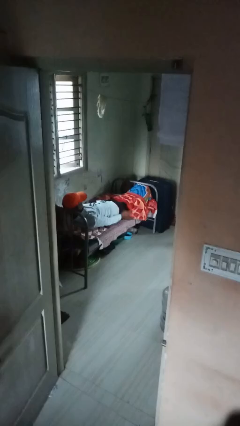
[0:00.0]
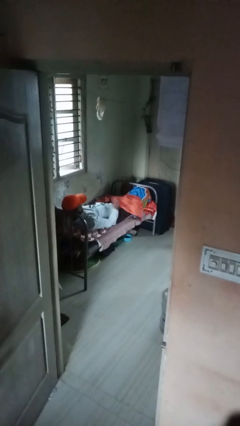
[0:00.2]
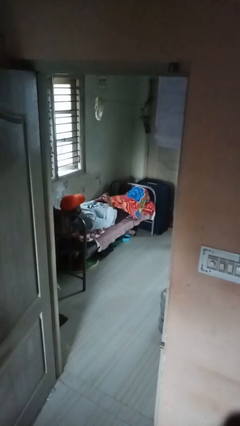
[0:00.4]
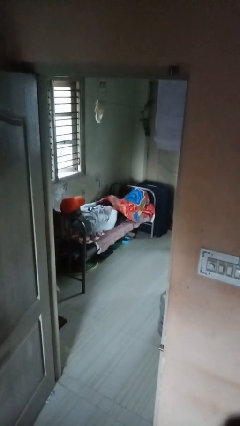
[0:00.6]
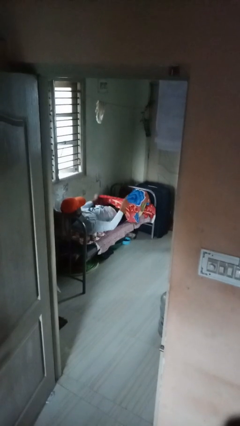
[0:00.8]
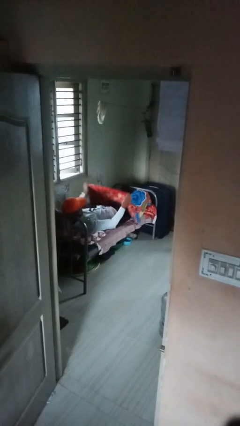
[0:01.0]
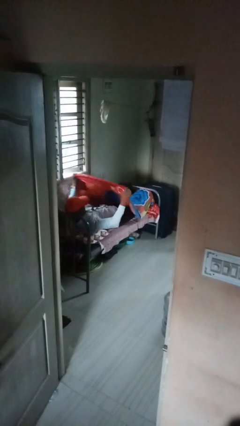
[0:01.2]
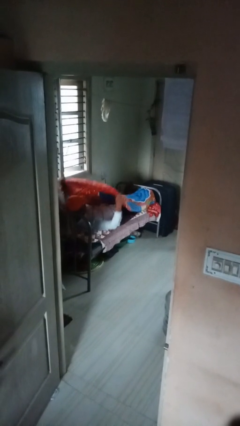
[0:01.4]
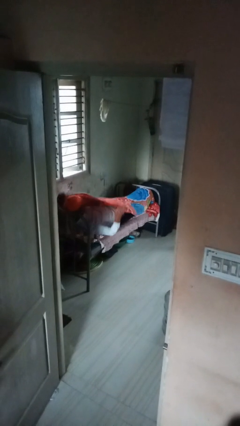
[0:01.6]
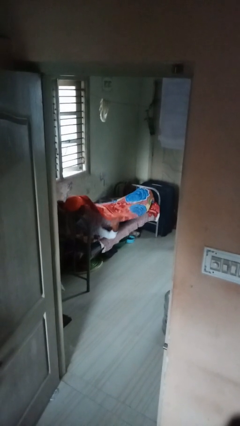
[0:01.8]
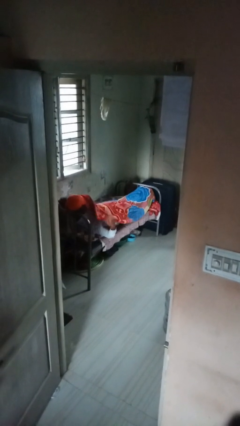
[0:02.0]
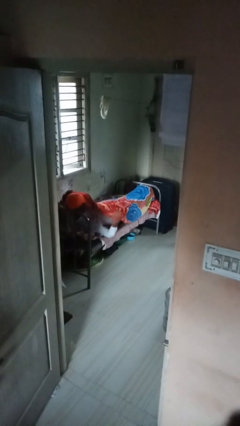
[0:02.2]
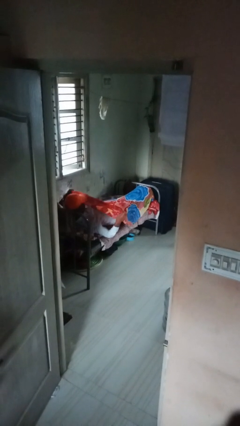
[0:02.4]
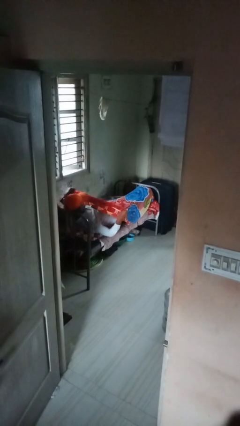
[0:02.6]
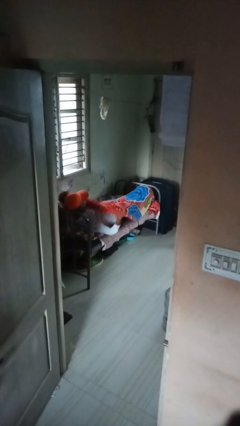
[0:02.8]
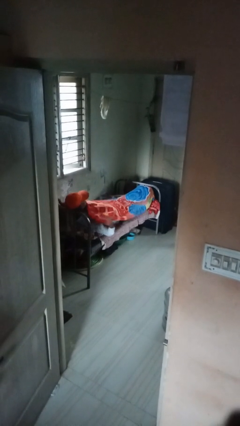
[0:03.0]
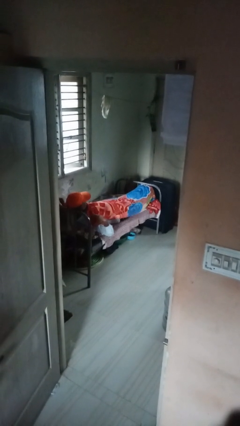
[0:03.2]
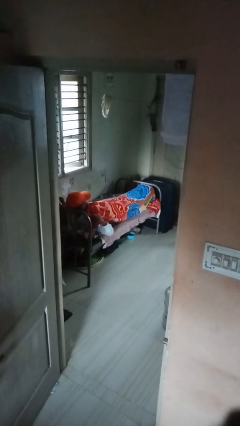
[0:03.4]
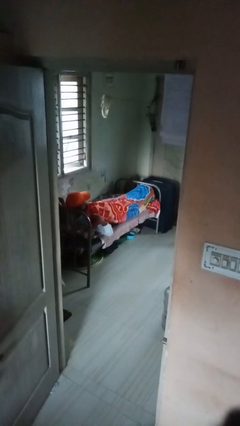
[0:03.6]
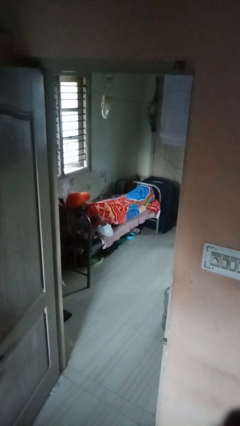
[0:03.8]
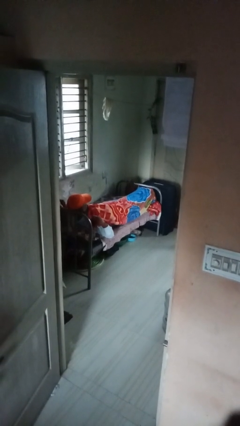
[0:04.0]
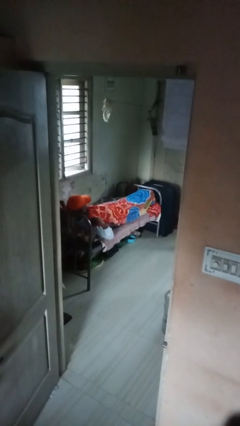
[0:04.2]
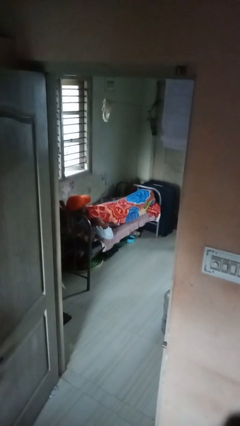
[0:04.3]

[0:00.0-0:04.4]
person covers with bedsheets

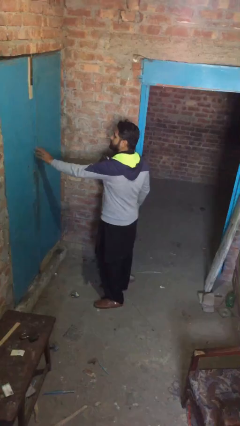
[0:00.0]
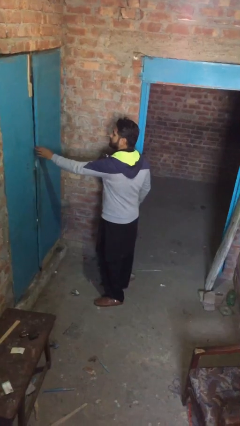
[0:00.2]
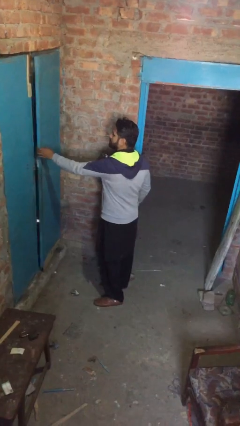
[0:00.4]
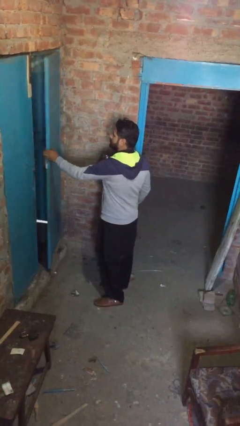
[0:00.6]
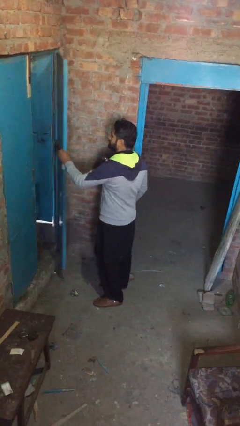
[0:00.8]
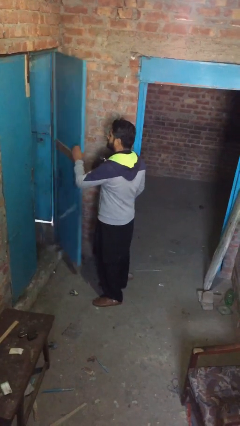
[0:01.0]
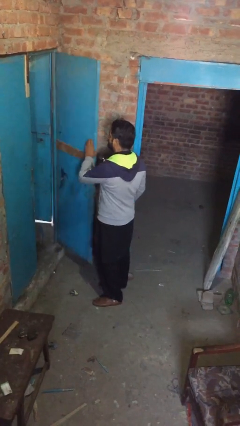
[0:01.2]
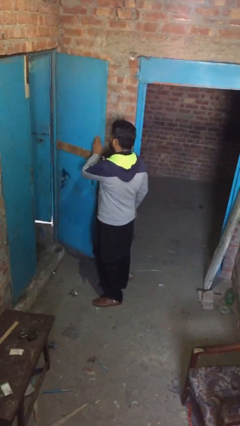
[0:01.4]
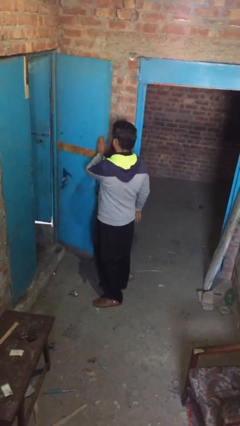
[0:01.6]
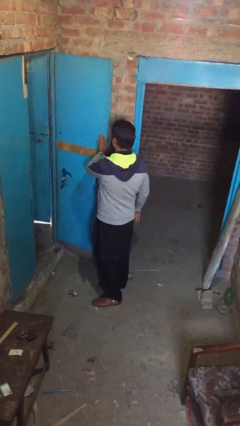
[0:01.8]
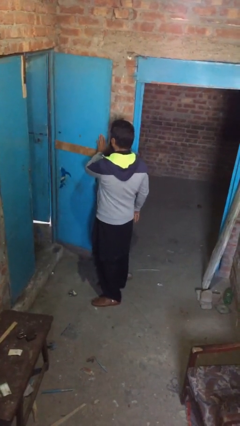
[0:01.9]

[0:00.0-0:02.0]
person opens facility door

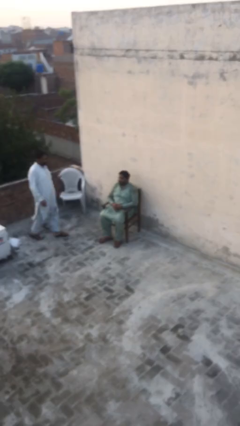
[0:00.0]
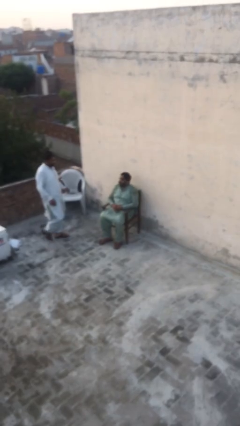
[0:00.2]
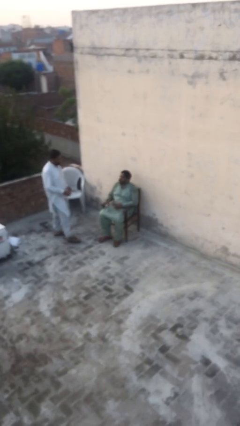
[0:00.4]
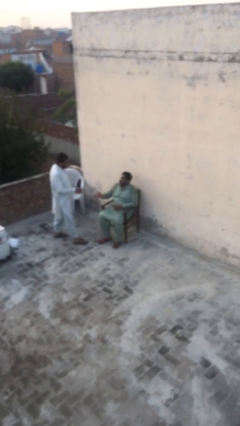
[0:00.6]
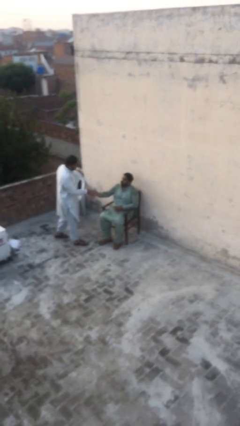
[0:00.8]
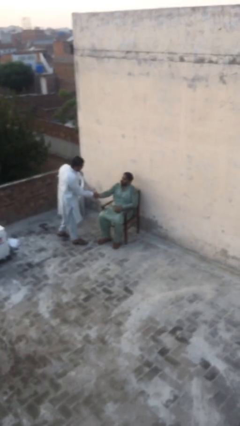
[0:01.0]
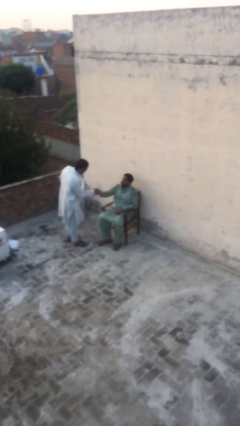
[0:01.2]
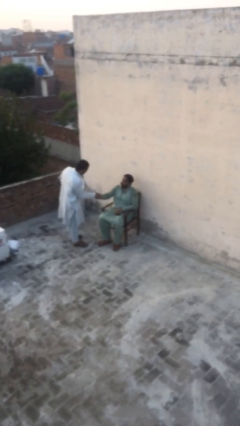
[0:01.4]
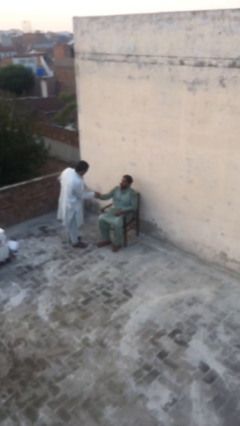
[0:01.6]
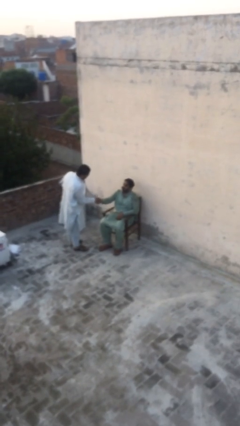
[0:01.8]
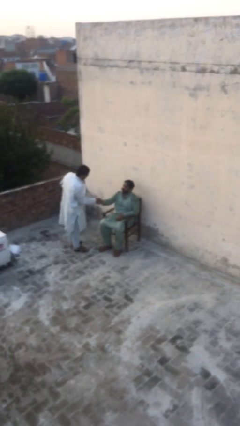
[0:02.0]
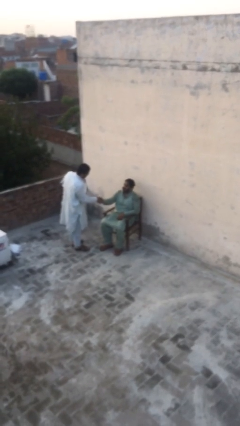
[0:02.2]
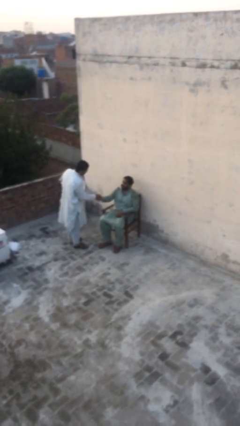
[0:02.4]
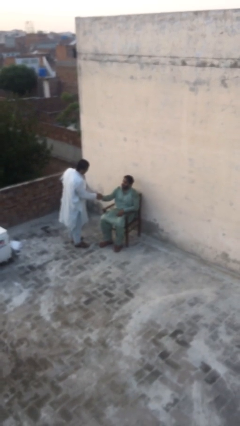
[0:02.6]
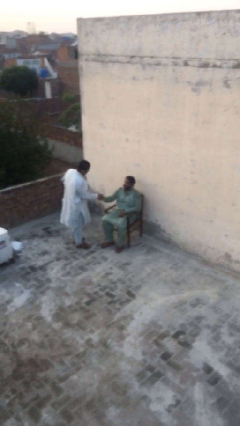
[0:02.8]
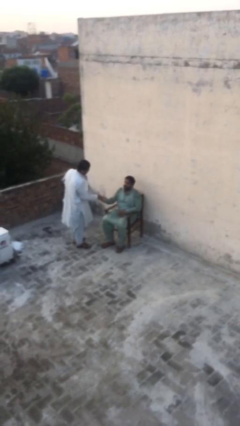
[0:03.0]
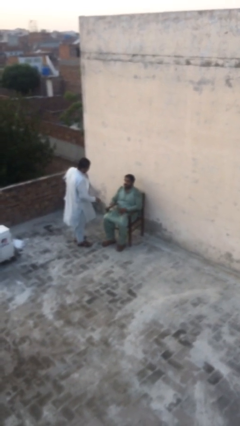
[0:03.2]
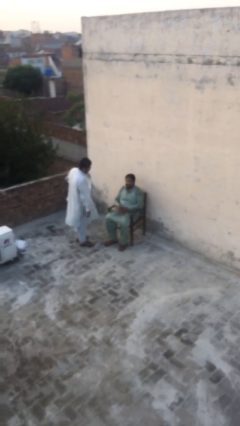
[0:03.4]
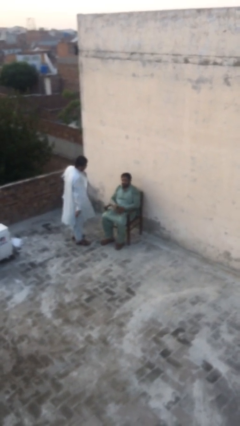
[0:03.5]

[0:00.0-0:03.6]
person shakes hand

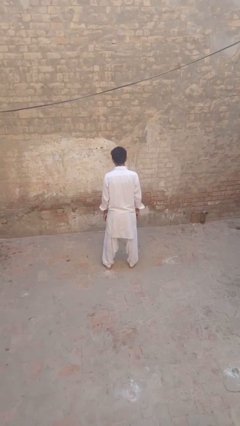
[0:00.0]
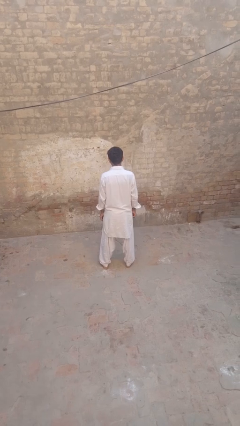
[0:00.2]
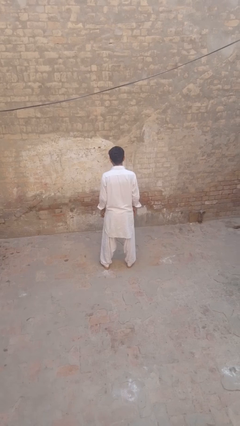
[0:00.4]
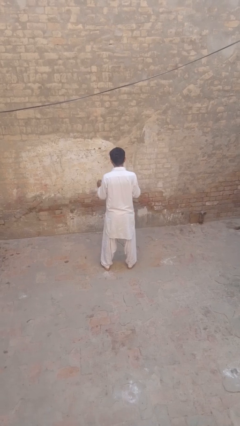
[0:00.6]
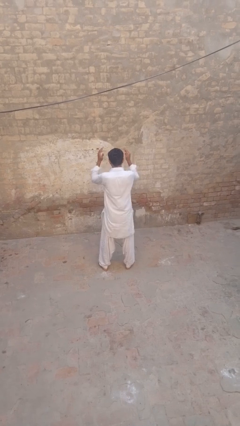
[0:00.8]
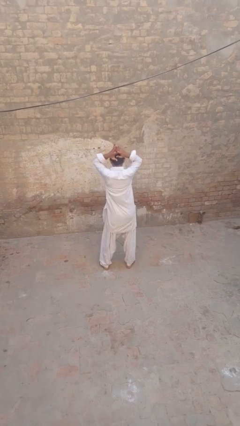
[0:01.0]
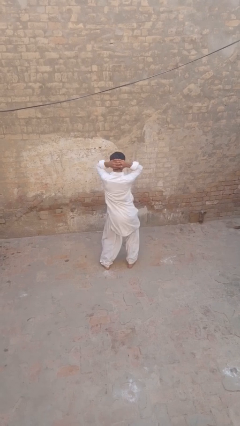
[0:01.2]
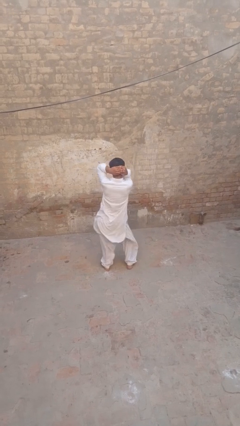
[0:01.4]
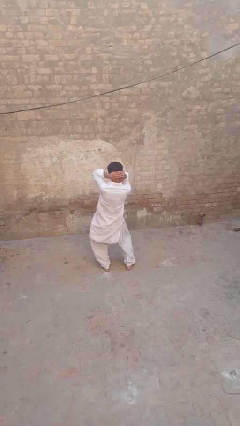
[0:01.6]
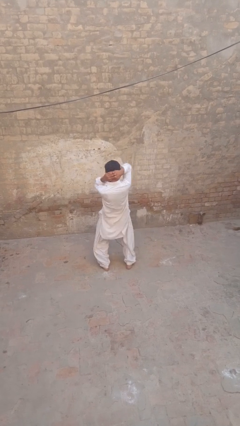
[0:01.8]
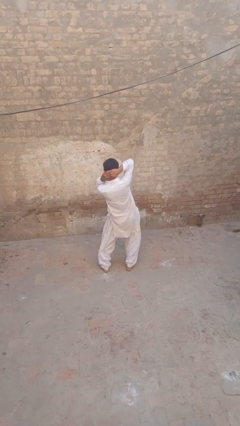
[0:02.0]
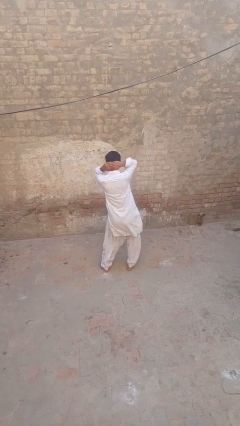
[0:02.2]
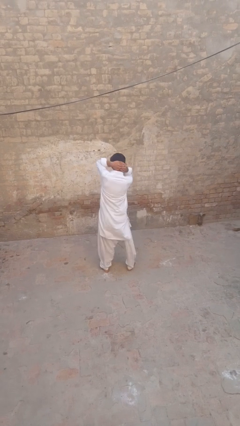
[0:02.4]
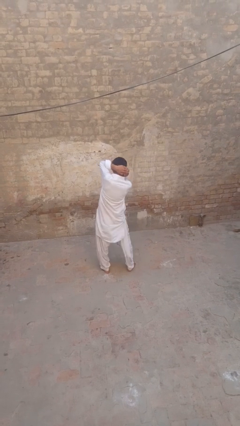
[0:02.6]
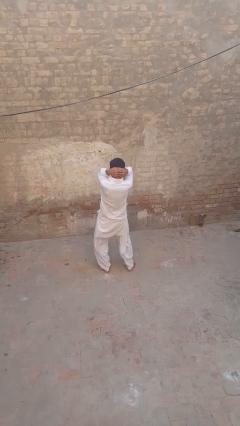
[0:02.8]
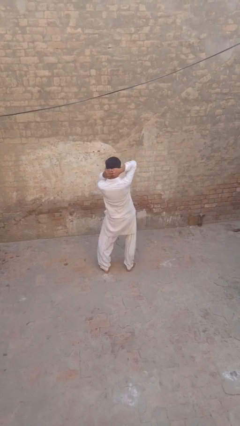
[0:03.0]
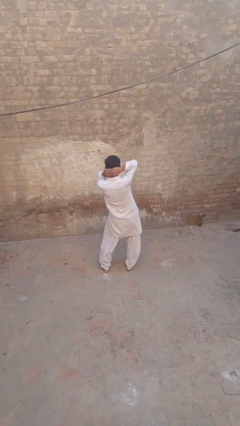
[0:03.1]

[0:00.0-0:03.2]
person dances in place

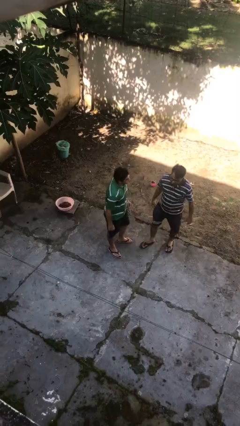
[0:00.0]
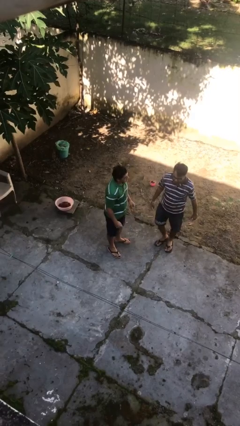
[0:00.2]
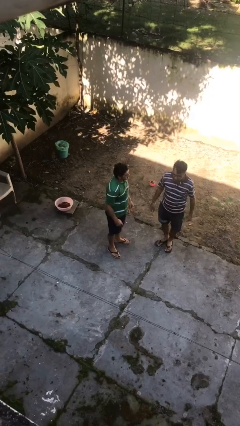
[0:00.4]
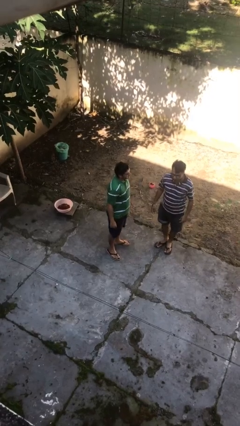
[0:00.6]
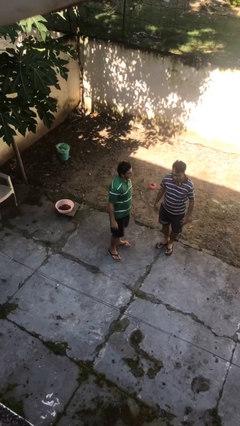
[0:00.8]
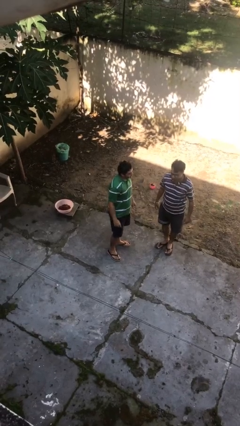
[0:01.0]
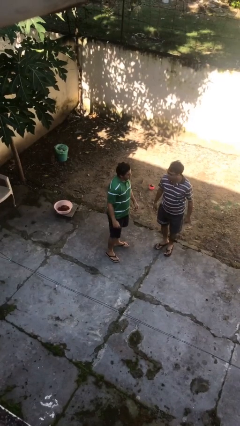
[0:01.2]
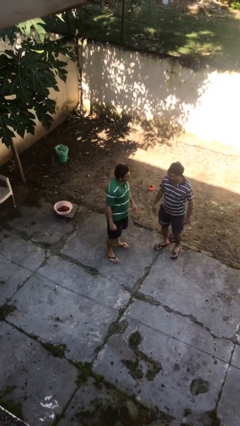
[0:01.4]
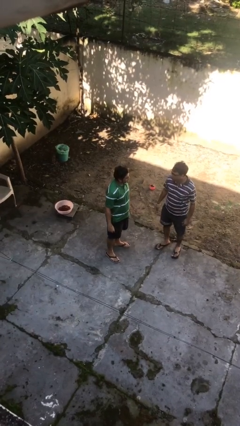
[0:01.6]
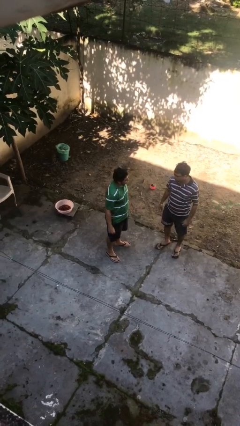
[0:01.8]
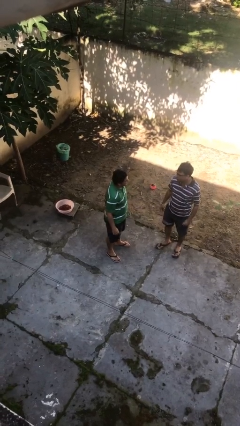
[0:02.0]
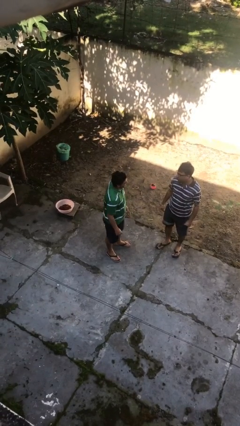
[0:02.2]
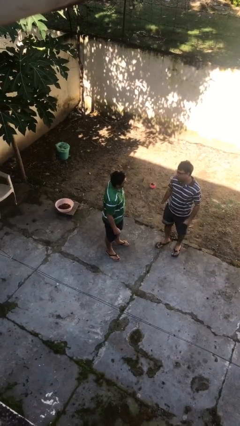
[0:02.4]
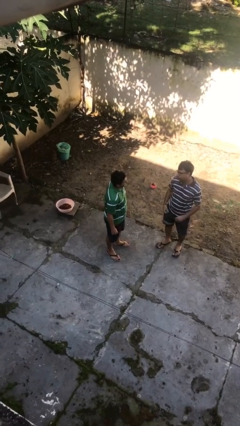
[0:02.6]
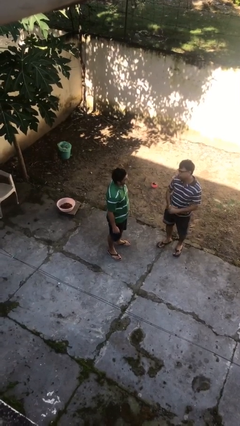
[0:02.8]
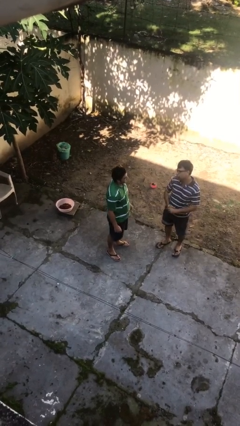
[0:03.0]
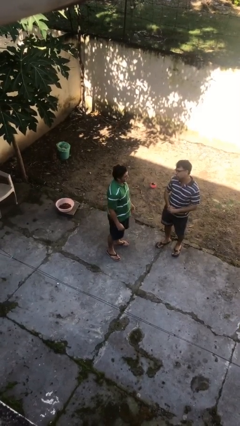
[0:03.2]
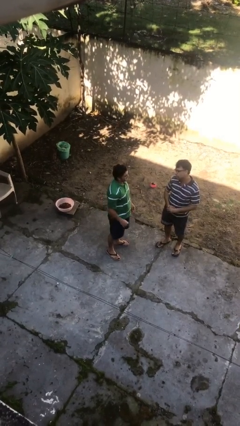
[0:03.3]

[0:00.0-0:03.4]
person talks to person

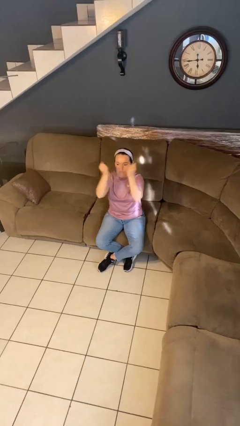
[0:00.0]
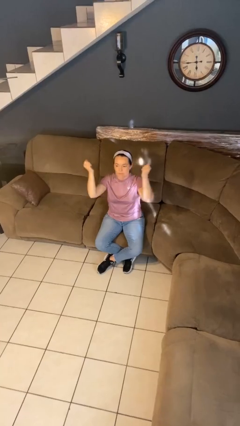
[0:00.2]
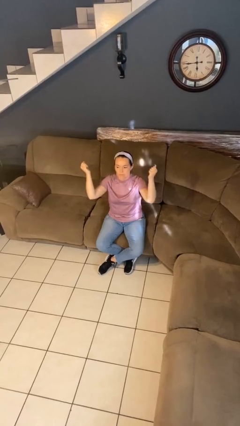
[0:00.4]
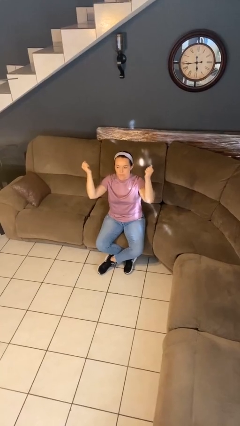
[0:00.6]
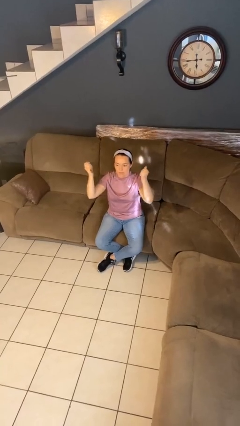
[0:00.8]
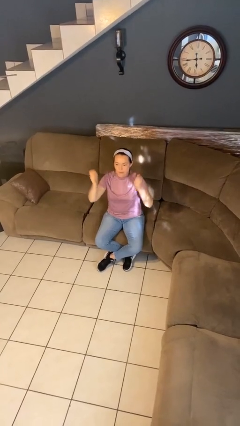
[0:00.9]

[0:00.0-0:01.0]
person gestures zoom out
